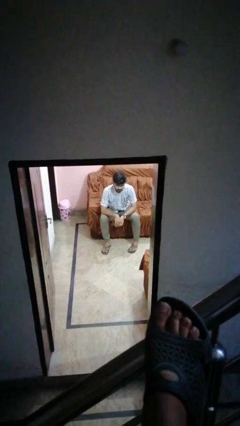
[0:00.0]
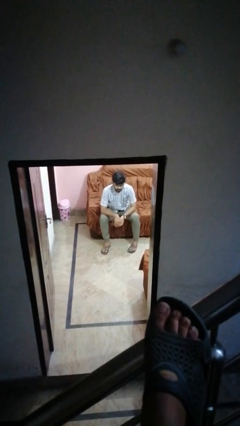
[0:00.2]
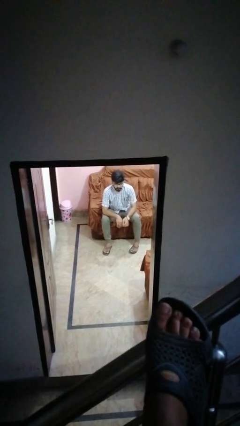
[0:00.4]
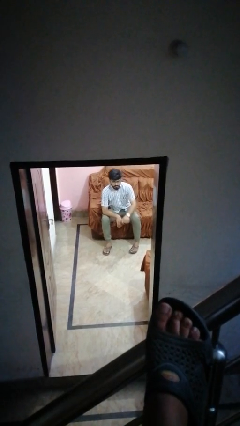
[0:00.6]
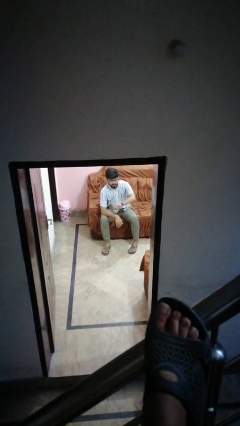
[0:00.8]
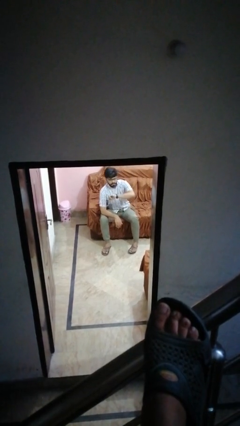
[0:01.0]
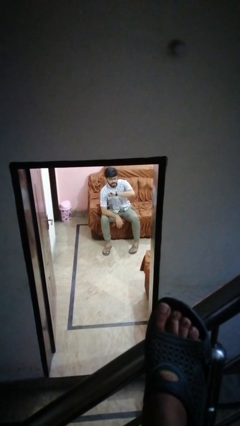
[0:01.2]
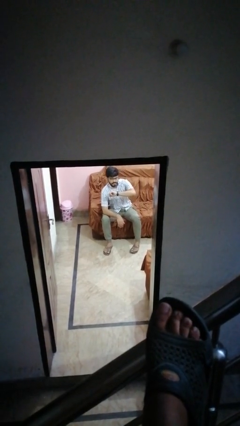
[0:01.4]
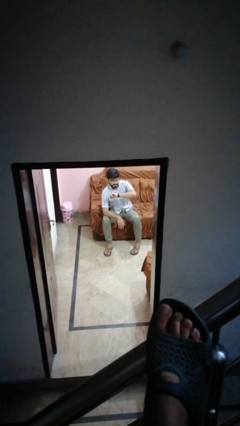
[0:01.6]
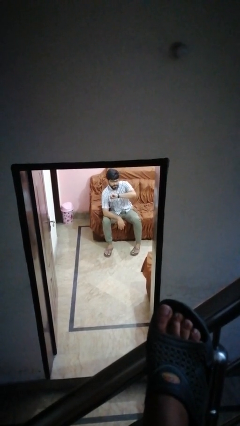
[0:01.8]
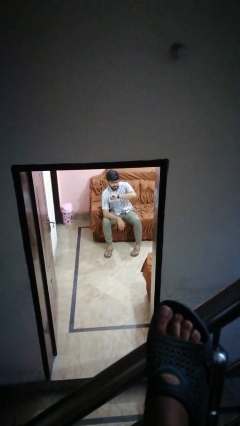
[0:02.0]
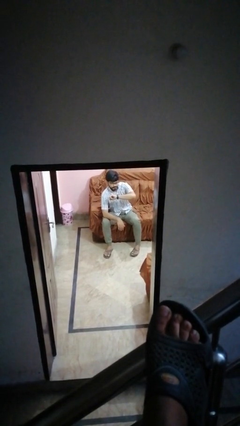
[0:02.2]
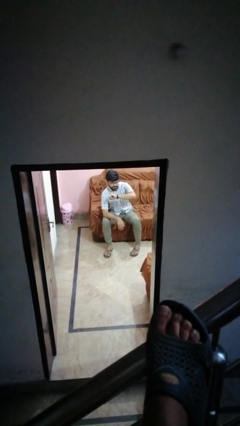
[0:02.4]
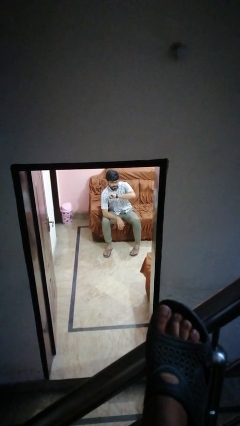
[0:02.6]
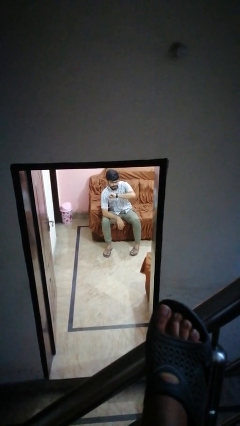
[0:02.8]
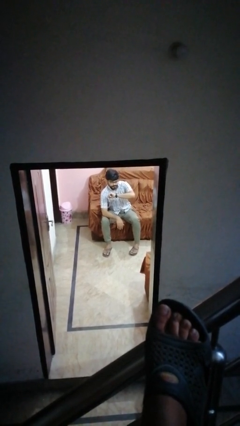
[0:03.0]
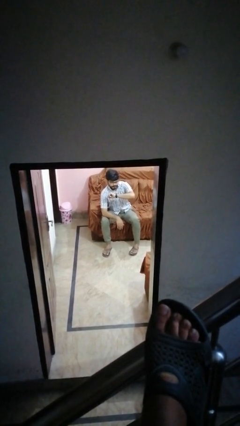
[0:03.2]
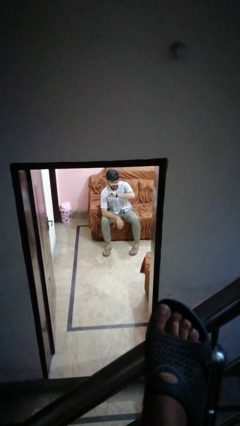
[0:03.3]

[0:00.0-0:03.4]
person looks at wristwatch

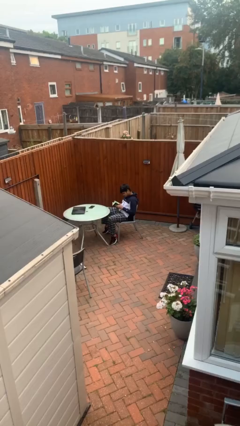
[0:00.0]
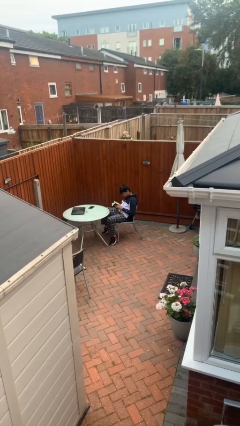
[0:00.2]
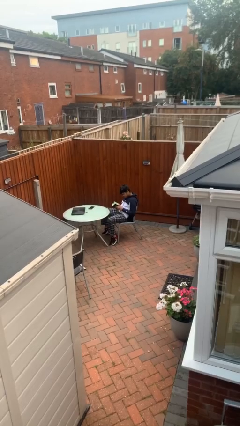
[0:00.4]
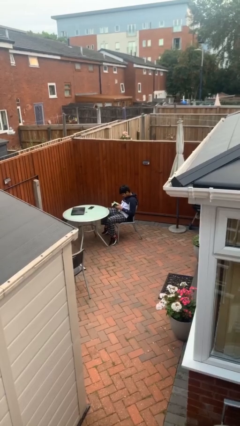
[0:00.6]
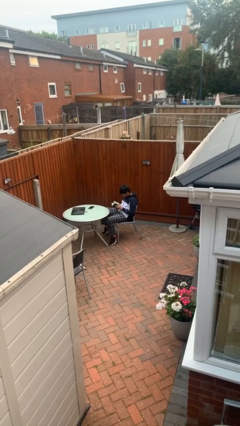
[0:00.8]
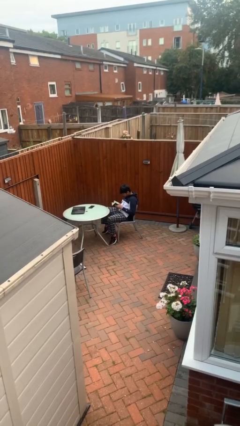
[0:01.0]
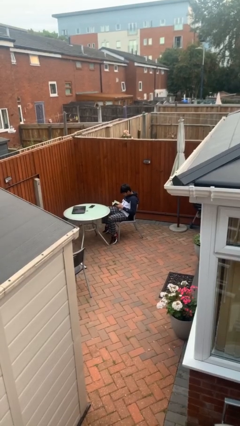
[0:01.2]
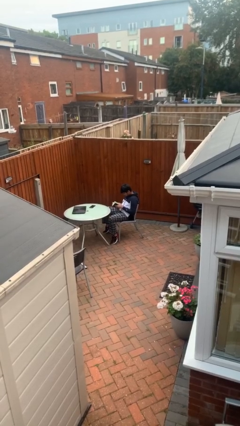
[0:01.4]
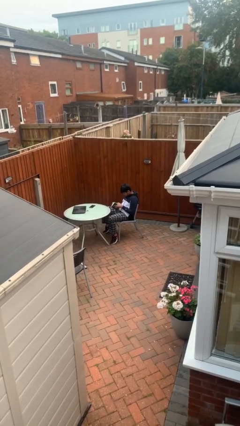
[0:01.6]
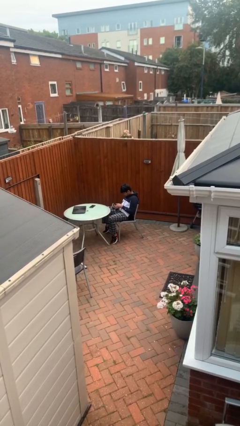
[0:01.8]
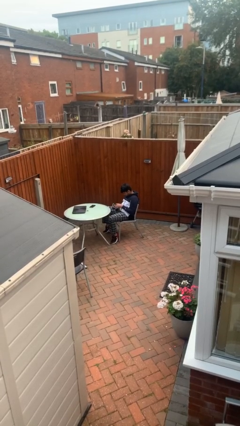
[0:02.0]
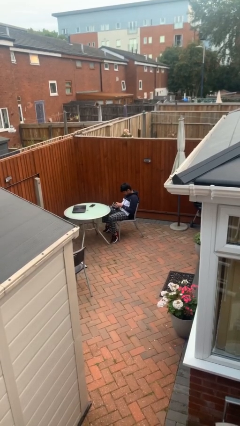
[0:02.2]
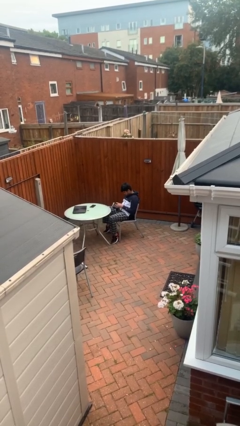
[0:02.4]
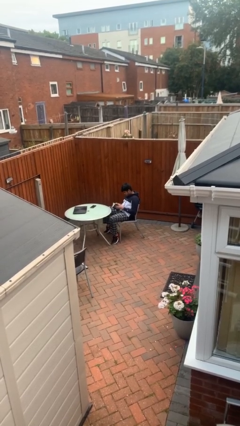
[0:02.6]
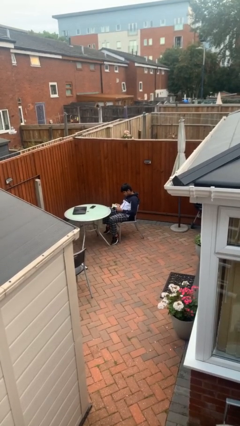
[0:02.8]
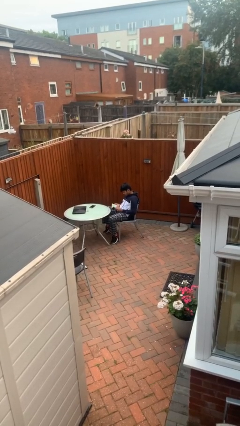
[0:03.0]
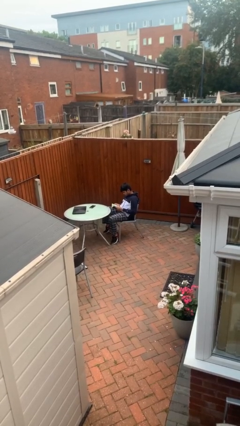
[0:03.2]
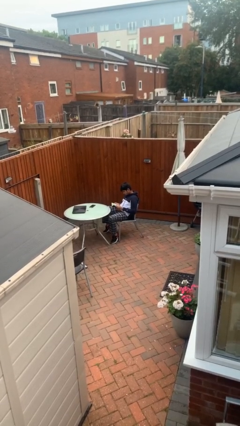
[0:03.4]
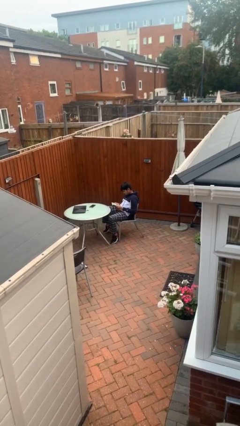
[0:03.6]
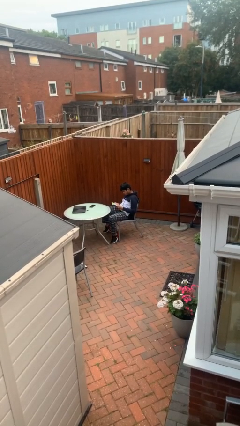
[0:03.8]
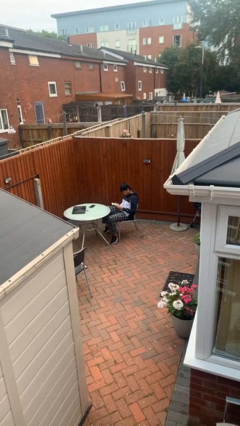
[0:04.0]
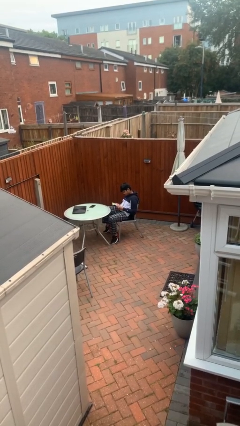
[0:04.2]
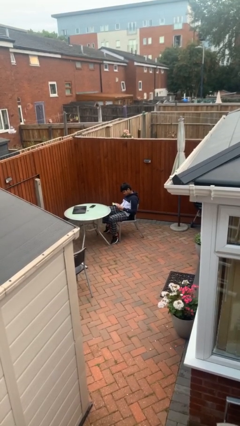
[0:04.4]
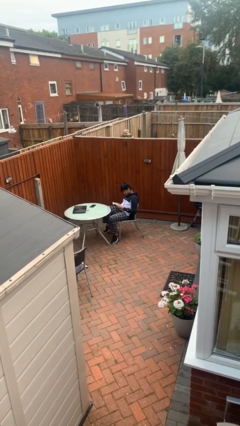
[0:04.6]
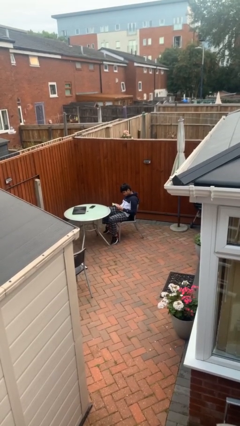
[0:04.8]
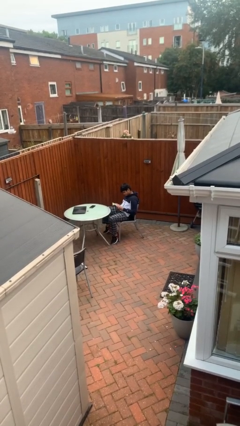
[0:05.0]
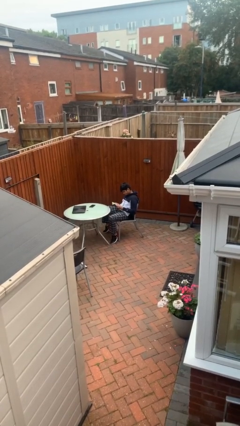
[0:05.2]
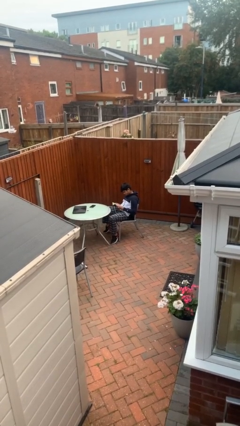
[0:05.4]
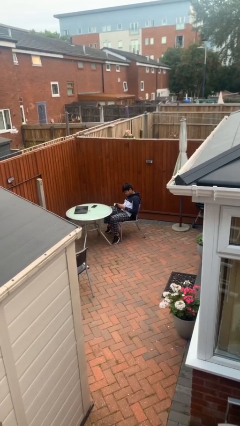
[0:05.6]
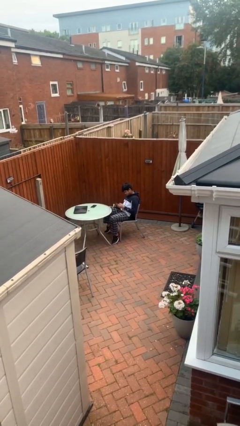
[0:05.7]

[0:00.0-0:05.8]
person reads document

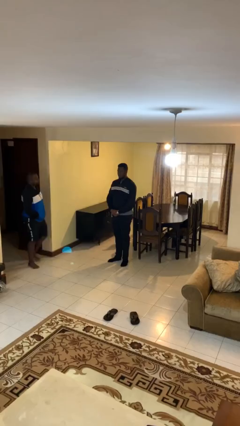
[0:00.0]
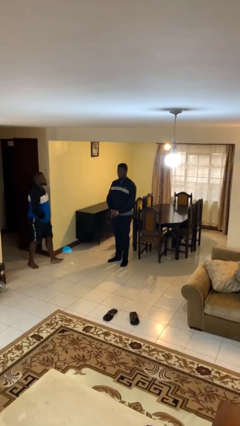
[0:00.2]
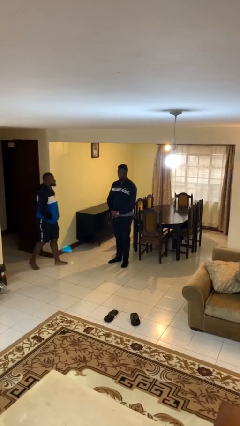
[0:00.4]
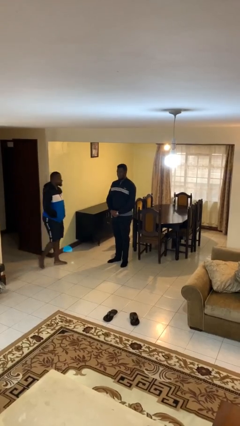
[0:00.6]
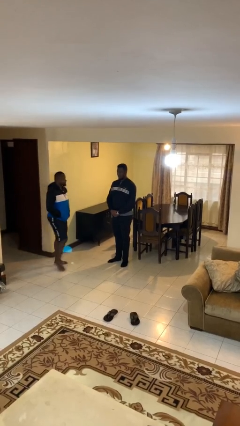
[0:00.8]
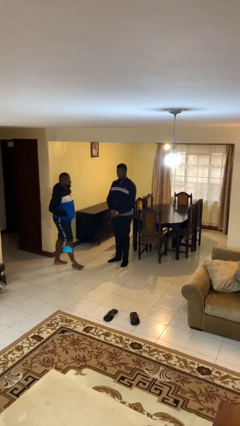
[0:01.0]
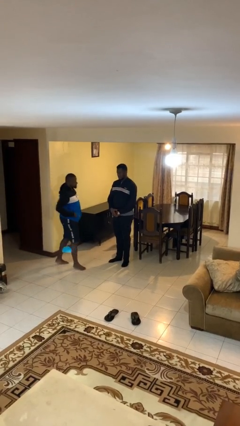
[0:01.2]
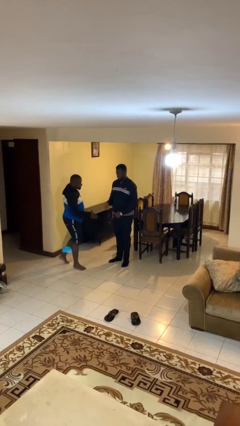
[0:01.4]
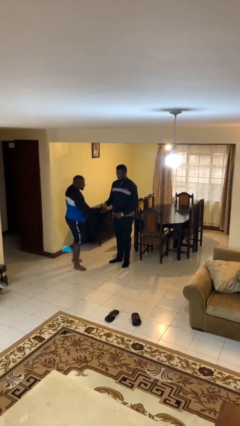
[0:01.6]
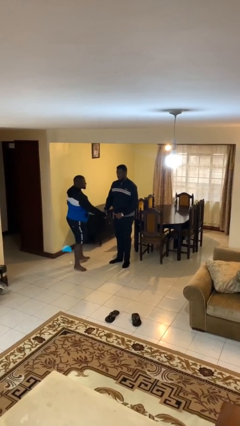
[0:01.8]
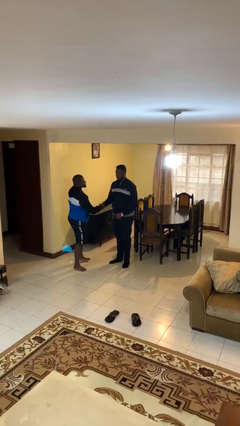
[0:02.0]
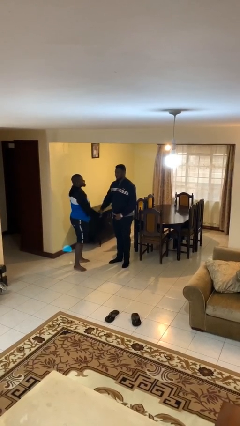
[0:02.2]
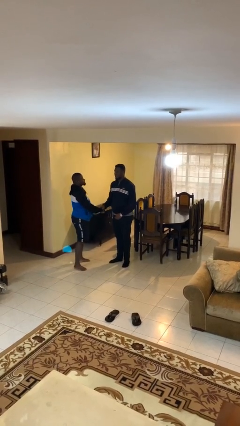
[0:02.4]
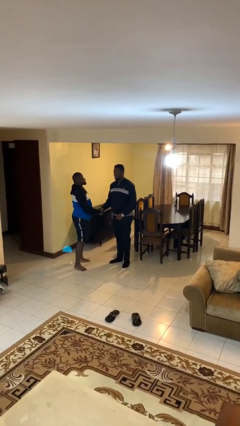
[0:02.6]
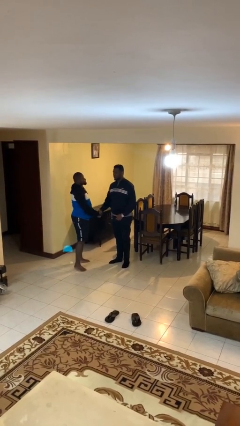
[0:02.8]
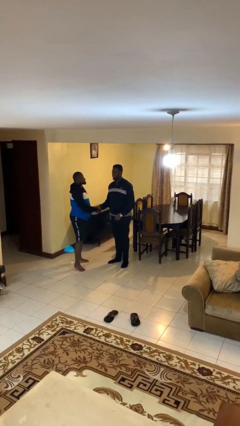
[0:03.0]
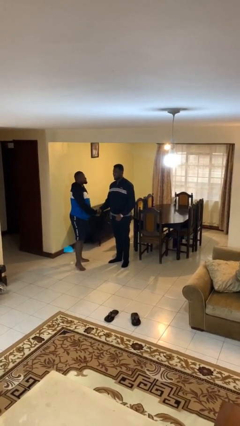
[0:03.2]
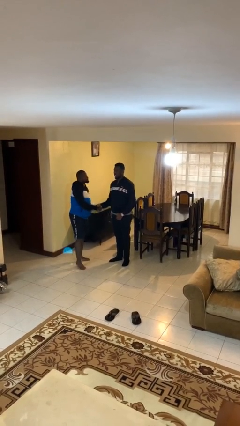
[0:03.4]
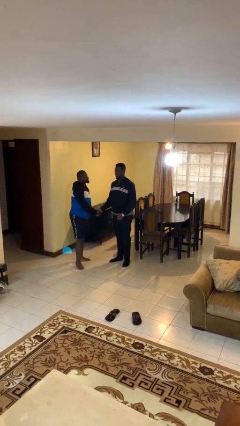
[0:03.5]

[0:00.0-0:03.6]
person shakes hand

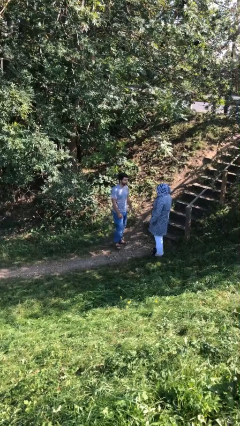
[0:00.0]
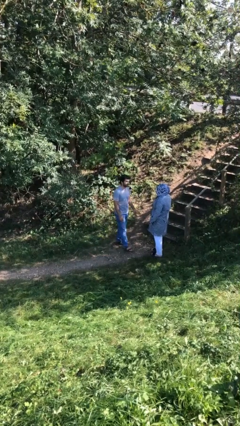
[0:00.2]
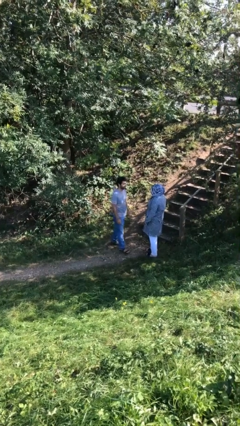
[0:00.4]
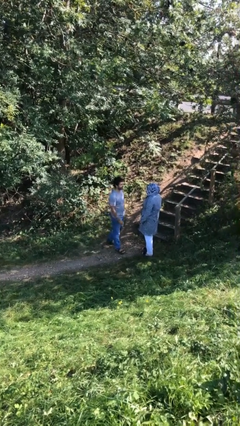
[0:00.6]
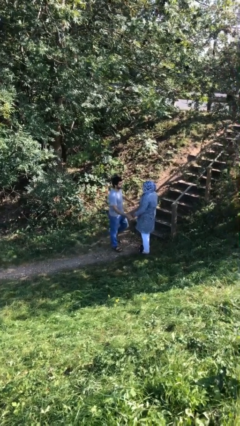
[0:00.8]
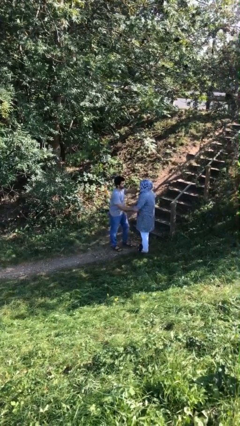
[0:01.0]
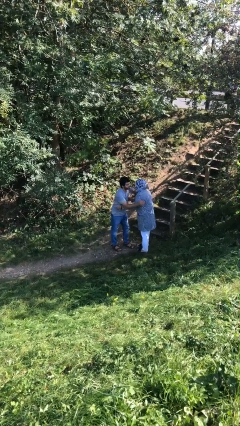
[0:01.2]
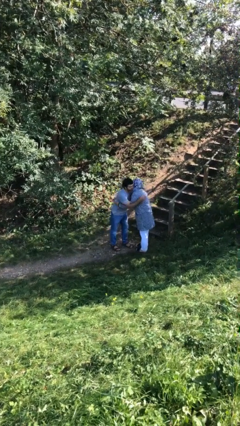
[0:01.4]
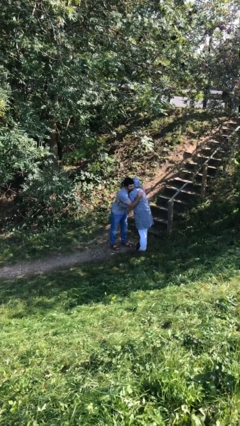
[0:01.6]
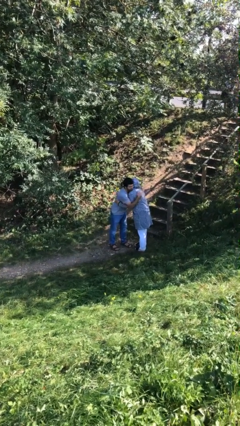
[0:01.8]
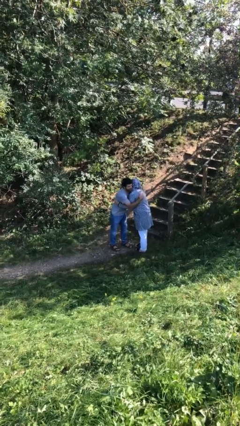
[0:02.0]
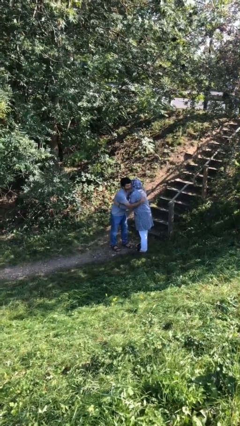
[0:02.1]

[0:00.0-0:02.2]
person embraces person

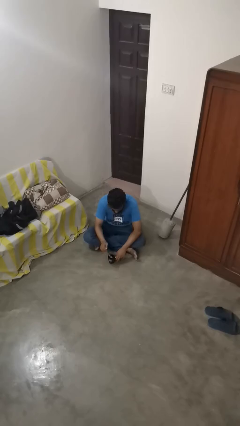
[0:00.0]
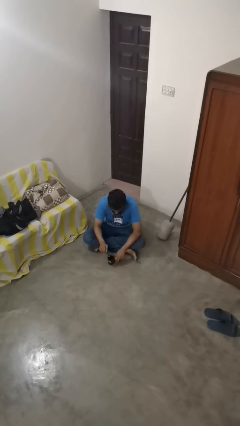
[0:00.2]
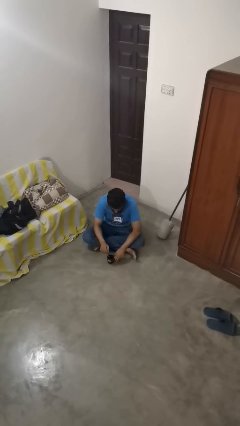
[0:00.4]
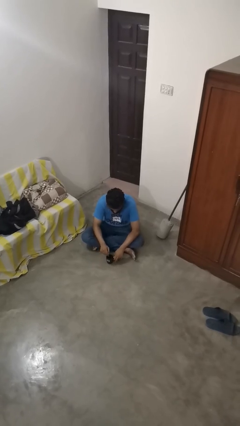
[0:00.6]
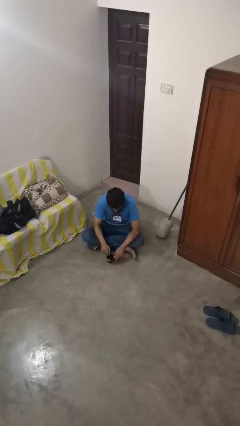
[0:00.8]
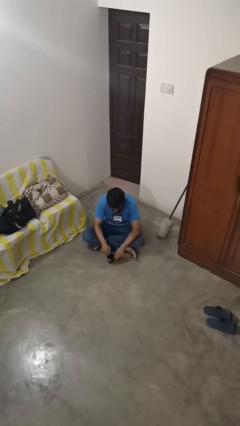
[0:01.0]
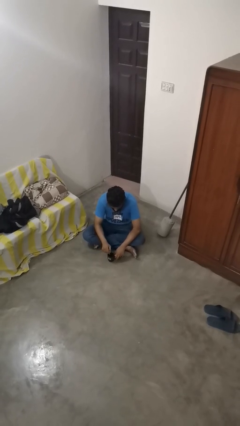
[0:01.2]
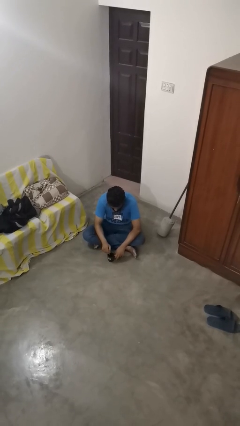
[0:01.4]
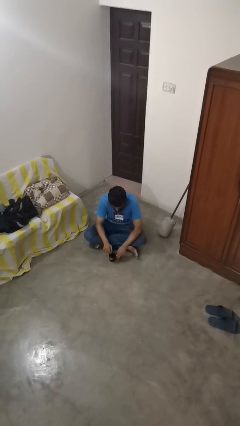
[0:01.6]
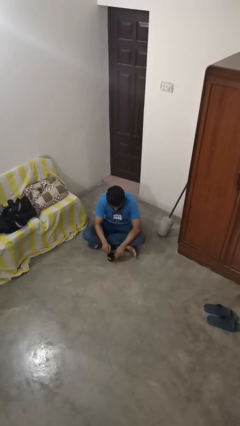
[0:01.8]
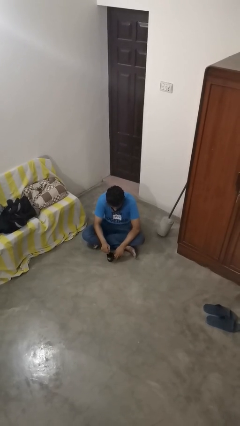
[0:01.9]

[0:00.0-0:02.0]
person stirs mug

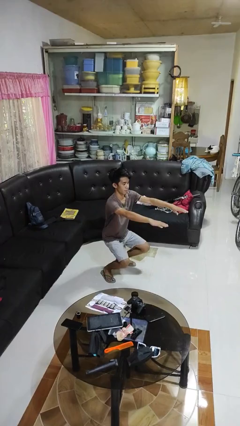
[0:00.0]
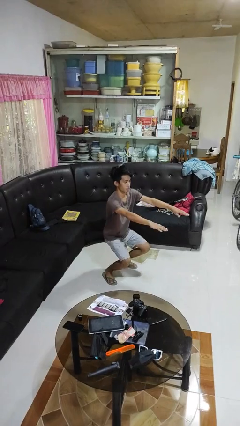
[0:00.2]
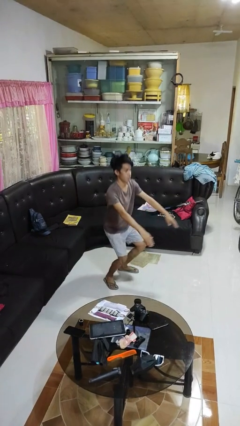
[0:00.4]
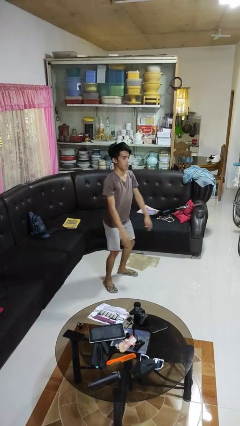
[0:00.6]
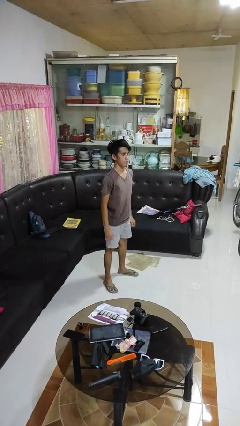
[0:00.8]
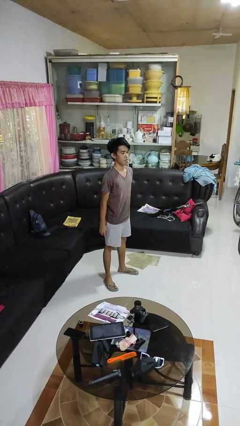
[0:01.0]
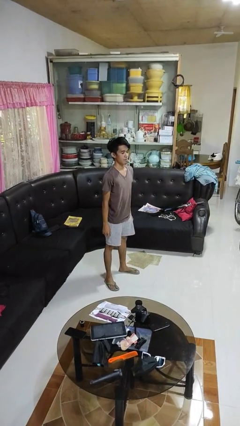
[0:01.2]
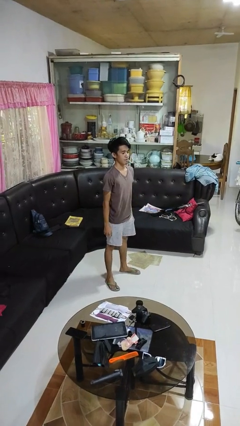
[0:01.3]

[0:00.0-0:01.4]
person stands up
